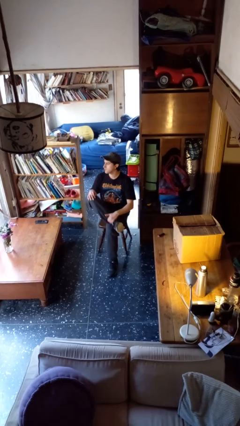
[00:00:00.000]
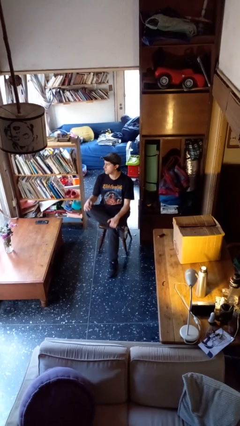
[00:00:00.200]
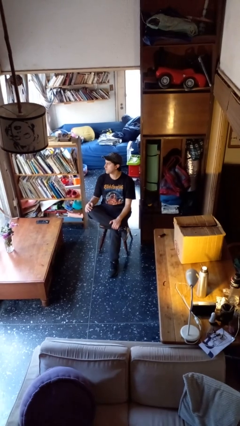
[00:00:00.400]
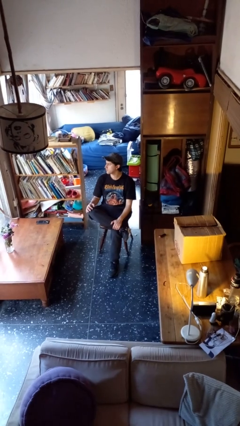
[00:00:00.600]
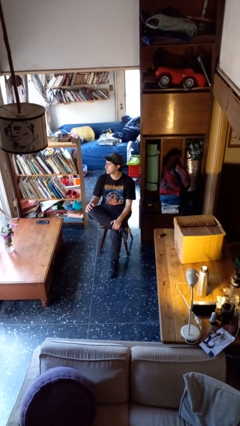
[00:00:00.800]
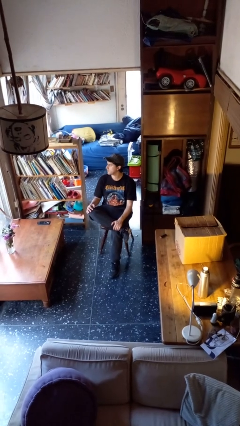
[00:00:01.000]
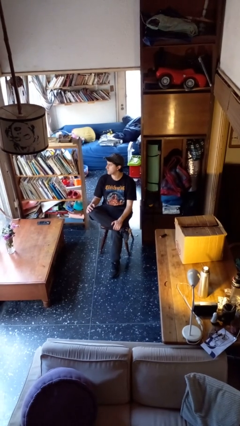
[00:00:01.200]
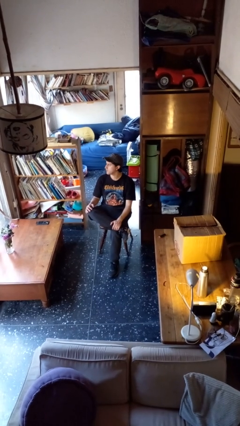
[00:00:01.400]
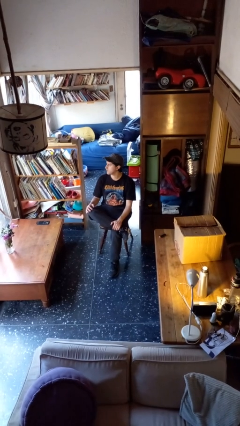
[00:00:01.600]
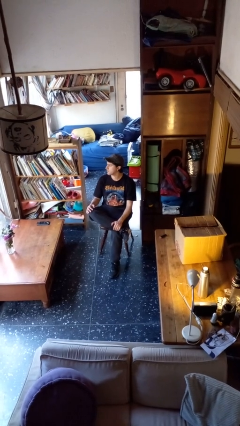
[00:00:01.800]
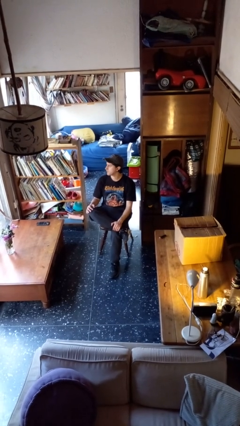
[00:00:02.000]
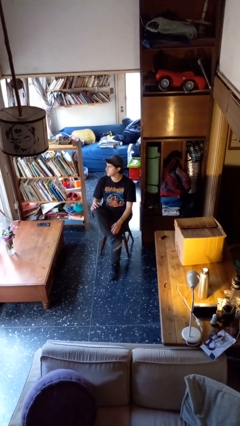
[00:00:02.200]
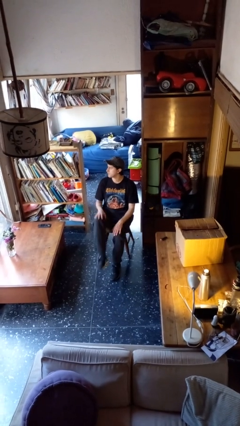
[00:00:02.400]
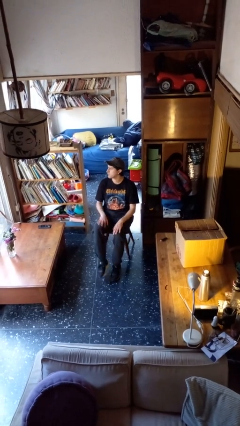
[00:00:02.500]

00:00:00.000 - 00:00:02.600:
person crosses legs

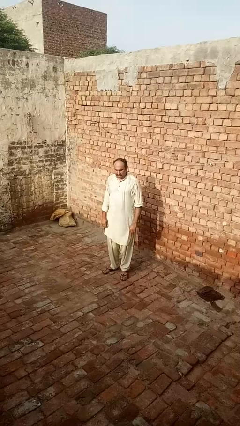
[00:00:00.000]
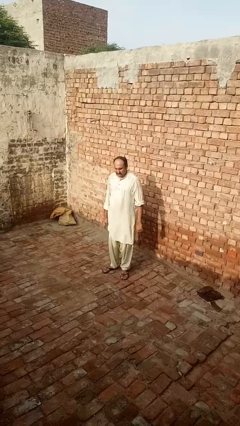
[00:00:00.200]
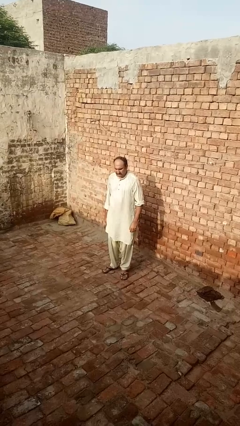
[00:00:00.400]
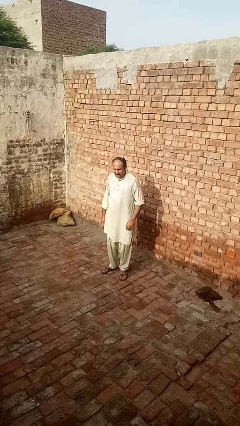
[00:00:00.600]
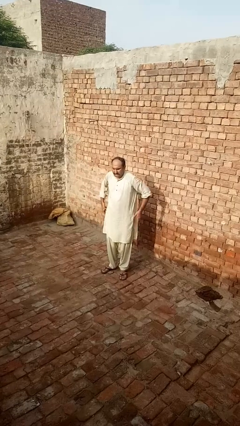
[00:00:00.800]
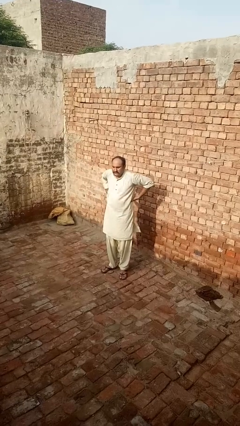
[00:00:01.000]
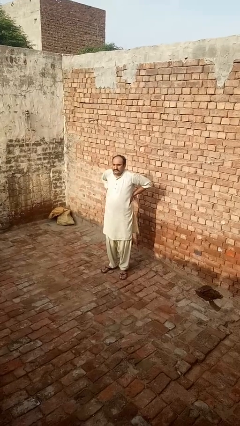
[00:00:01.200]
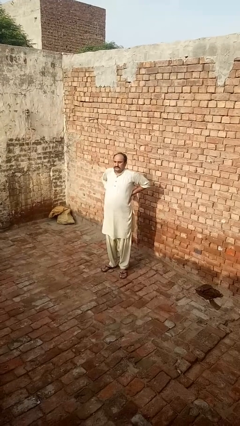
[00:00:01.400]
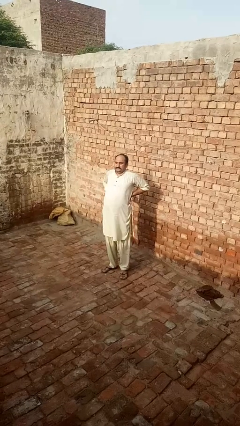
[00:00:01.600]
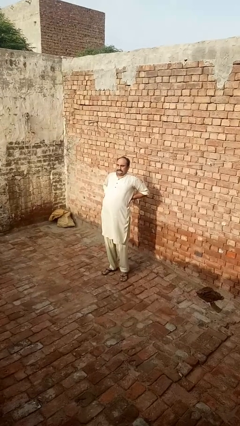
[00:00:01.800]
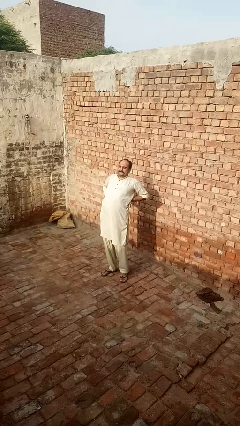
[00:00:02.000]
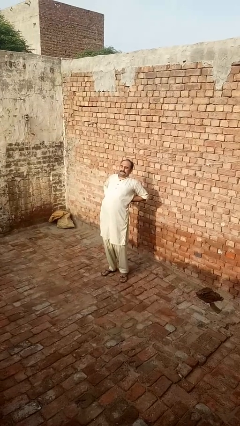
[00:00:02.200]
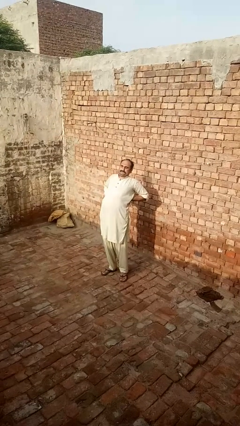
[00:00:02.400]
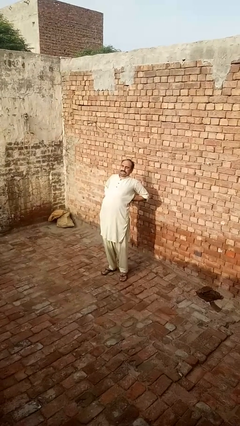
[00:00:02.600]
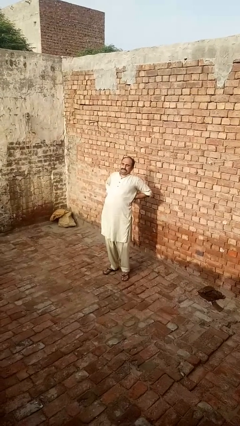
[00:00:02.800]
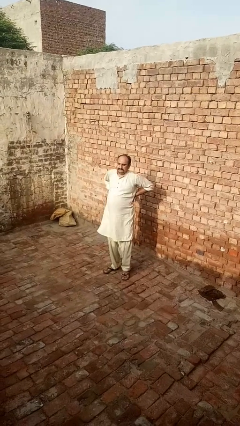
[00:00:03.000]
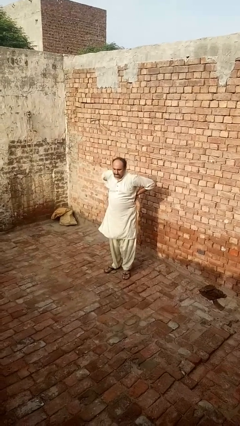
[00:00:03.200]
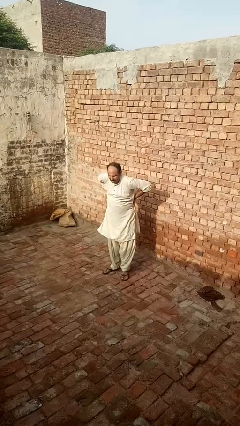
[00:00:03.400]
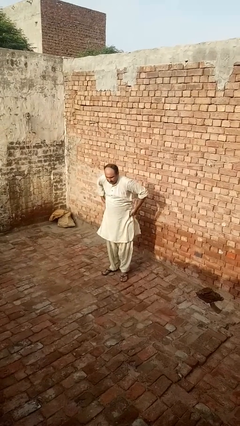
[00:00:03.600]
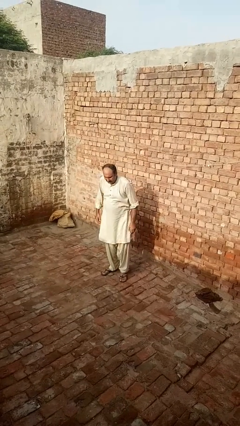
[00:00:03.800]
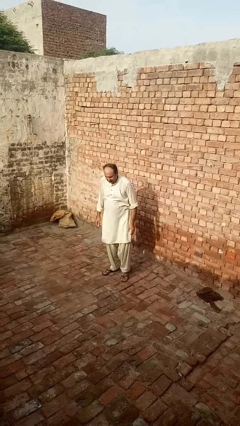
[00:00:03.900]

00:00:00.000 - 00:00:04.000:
person stretches back

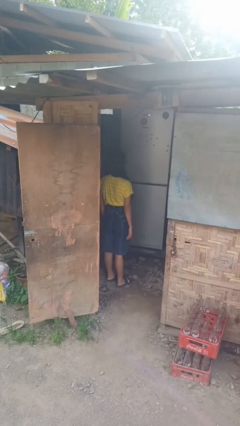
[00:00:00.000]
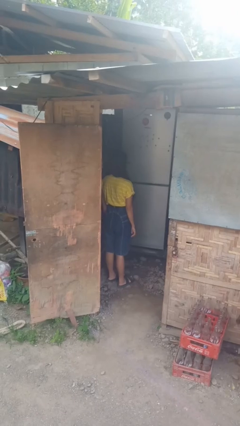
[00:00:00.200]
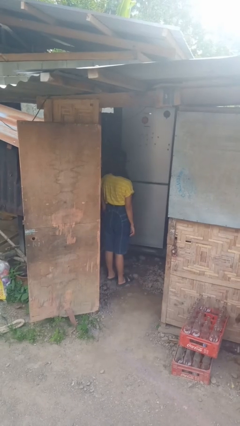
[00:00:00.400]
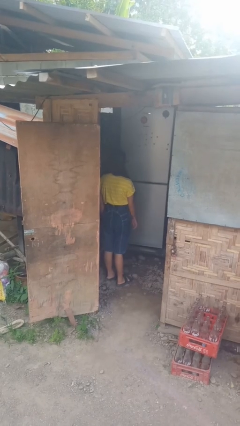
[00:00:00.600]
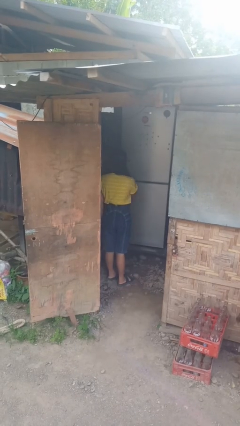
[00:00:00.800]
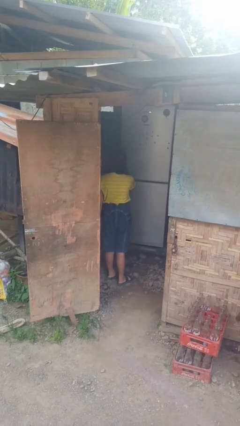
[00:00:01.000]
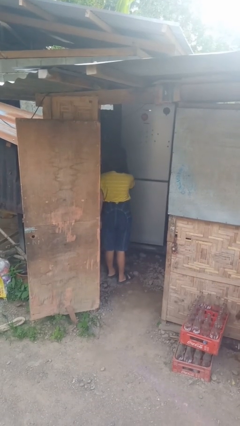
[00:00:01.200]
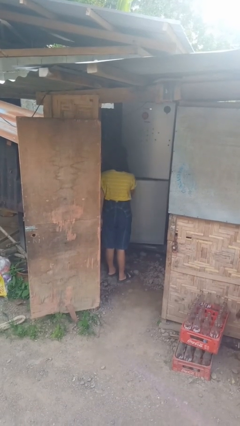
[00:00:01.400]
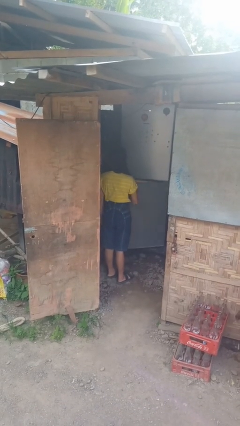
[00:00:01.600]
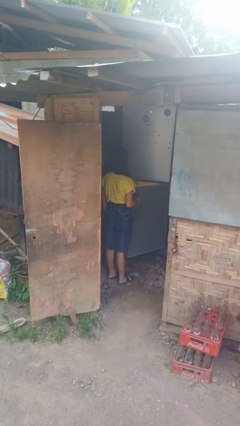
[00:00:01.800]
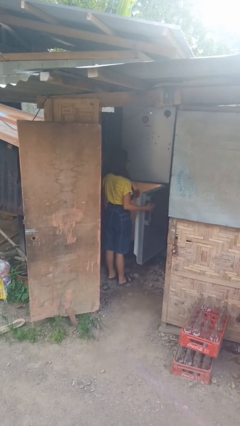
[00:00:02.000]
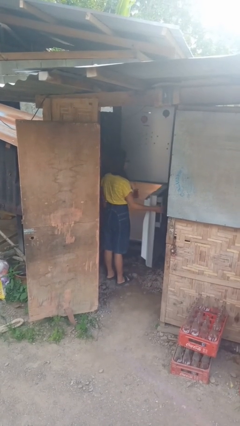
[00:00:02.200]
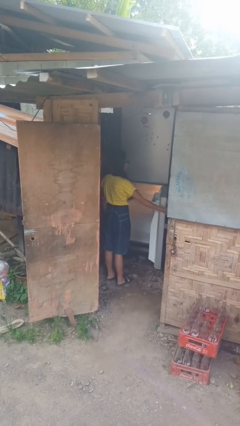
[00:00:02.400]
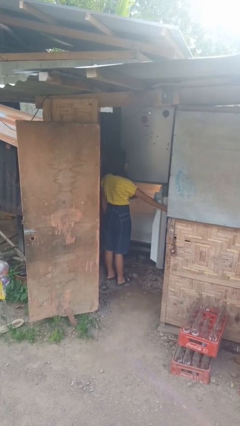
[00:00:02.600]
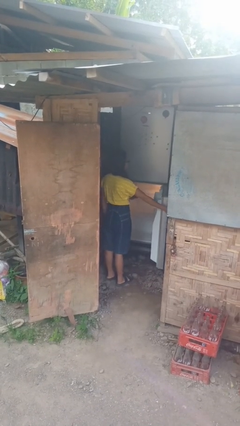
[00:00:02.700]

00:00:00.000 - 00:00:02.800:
person opens refrigerator

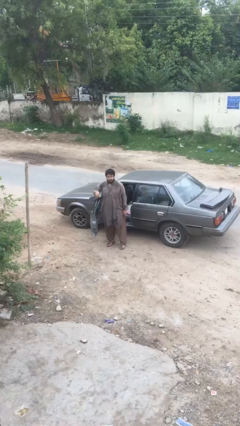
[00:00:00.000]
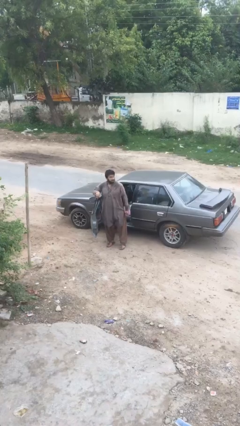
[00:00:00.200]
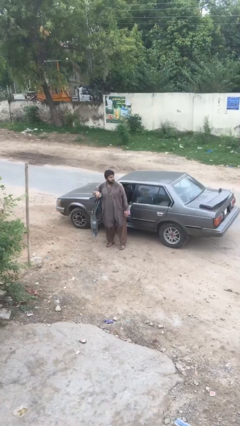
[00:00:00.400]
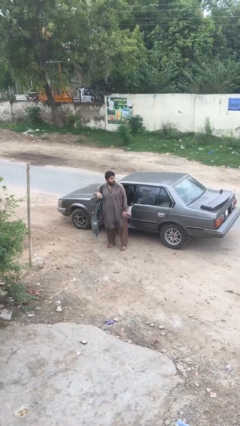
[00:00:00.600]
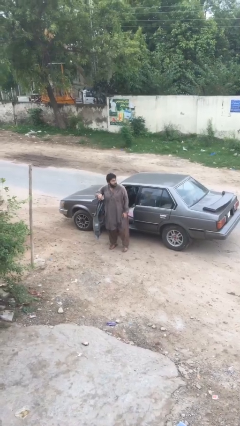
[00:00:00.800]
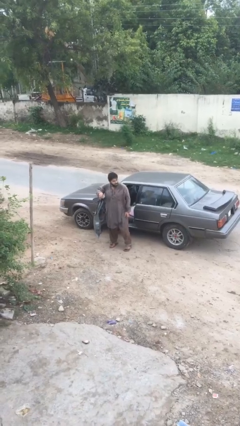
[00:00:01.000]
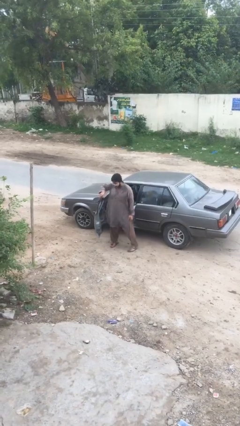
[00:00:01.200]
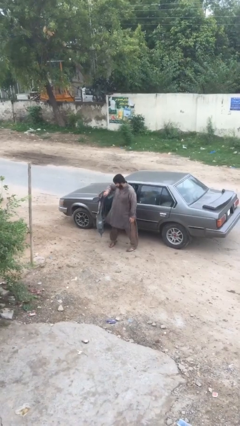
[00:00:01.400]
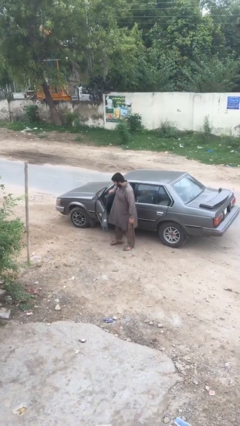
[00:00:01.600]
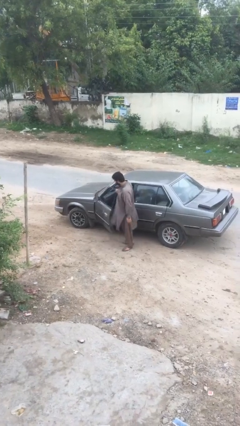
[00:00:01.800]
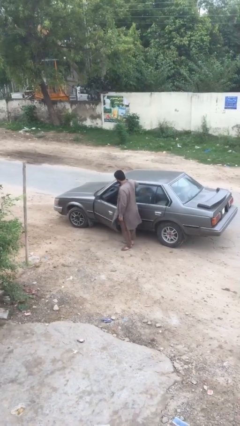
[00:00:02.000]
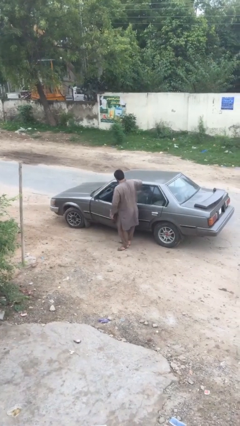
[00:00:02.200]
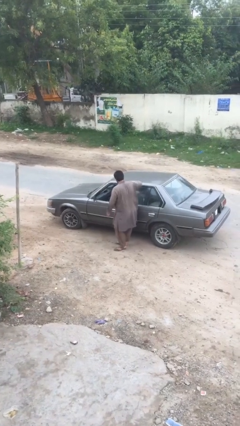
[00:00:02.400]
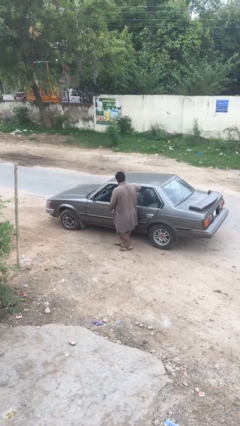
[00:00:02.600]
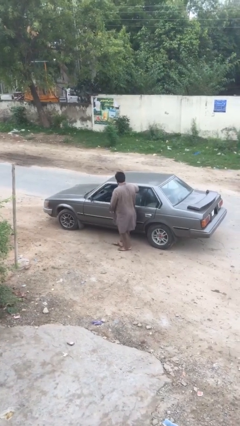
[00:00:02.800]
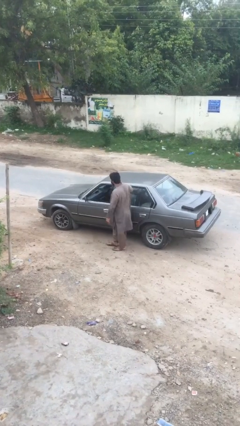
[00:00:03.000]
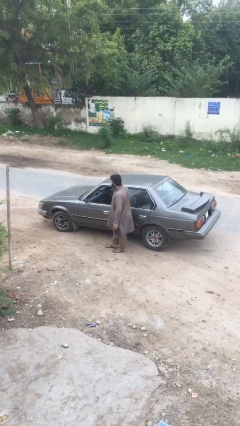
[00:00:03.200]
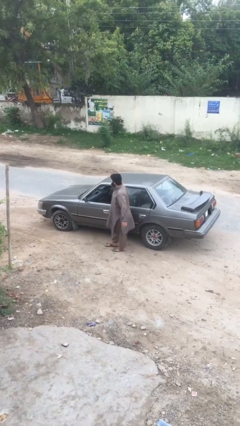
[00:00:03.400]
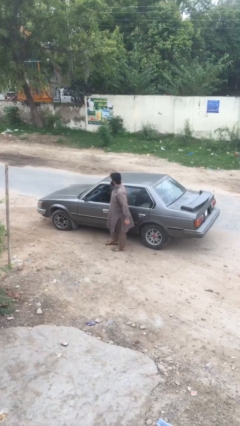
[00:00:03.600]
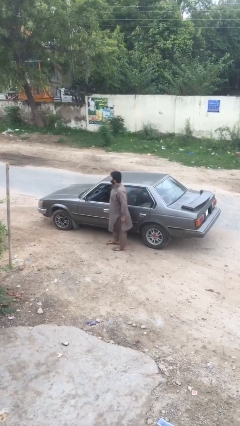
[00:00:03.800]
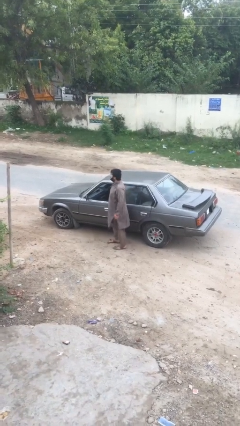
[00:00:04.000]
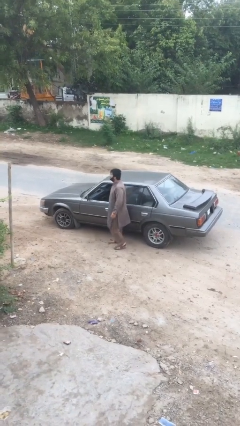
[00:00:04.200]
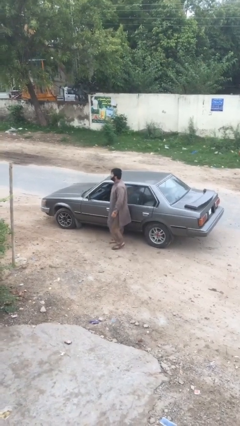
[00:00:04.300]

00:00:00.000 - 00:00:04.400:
person closes car door

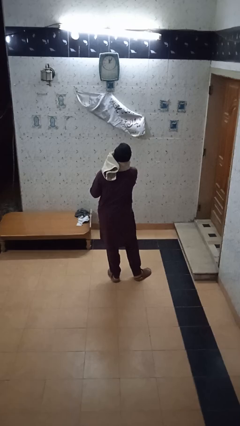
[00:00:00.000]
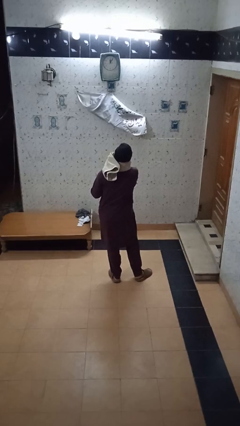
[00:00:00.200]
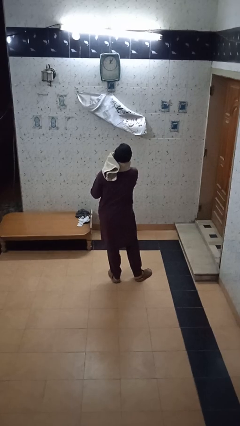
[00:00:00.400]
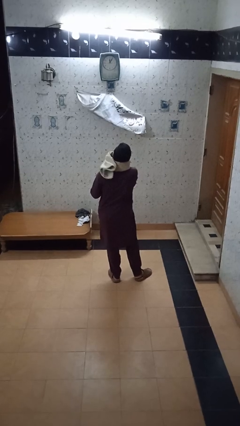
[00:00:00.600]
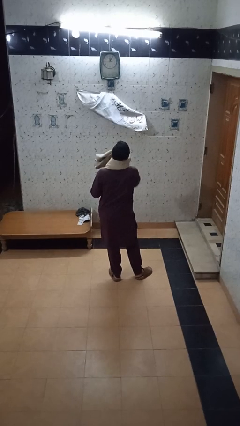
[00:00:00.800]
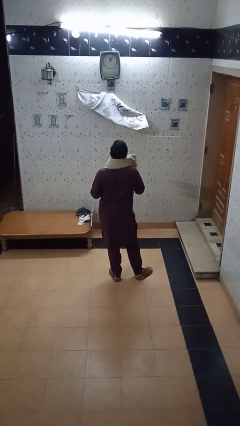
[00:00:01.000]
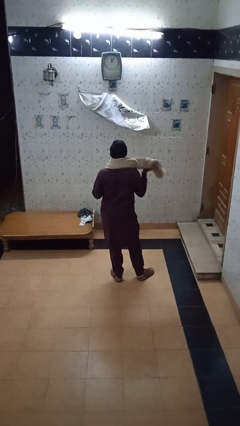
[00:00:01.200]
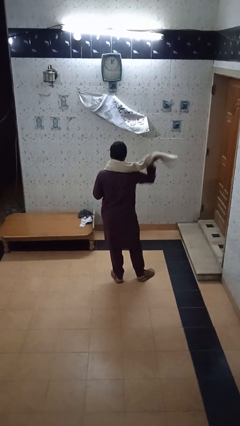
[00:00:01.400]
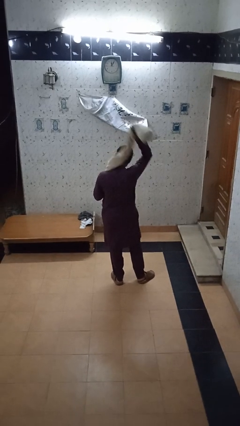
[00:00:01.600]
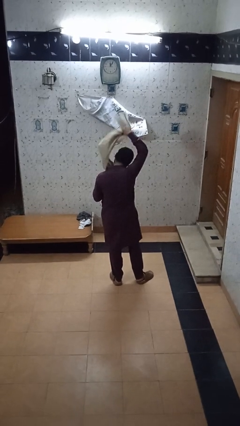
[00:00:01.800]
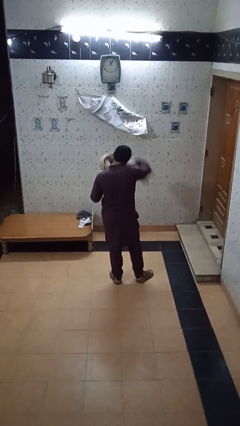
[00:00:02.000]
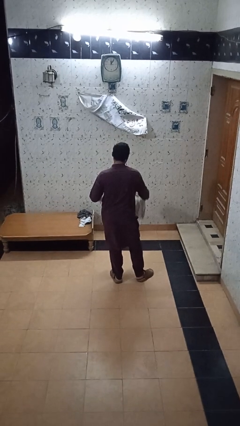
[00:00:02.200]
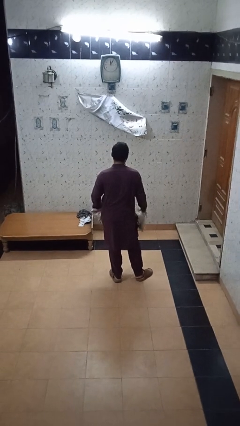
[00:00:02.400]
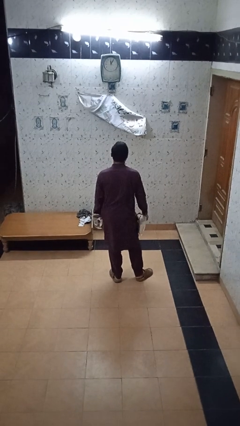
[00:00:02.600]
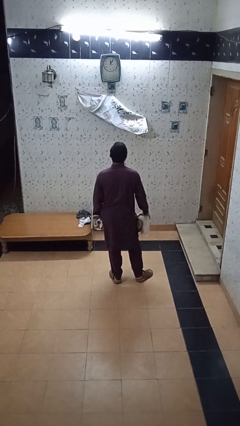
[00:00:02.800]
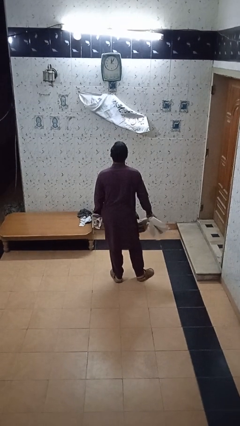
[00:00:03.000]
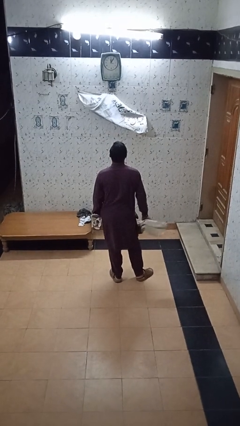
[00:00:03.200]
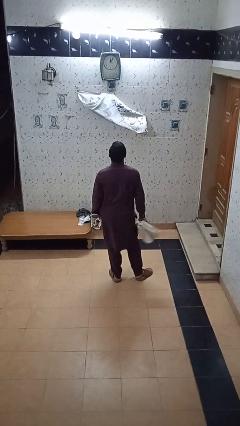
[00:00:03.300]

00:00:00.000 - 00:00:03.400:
person takes off scarf
